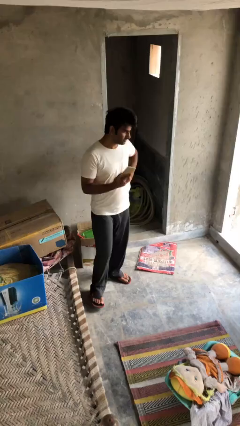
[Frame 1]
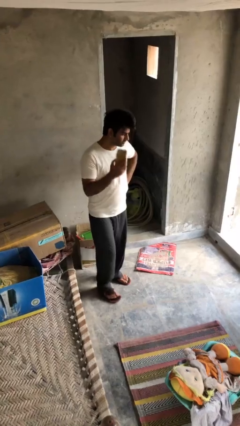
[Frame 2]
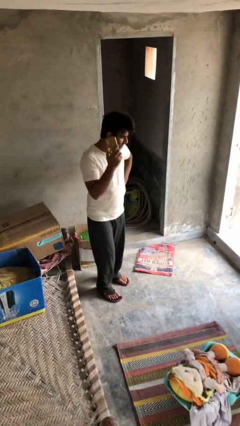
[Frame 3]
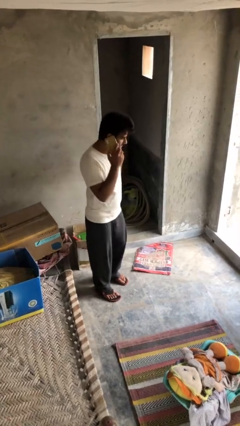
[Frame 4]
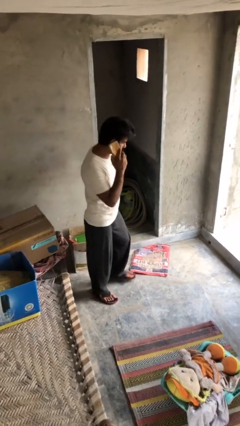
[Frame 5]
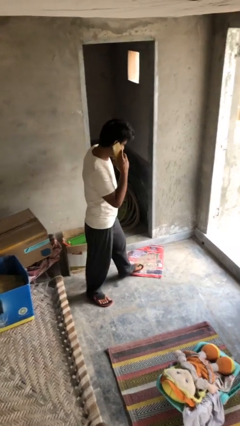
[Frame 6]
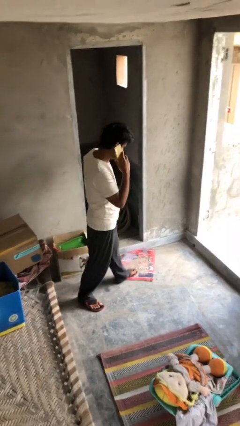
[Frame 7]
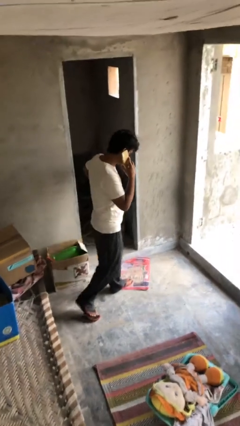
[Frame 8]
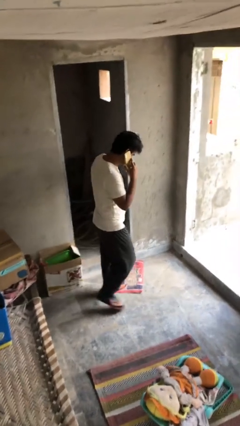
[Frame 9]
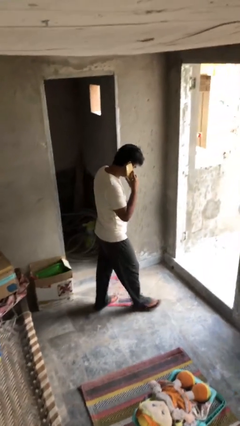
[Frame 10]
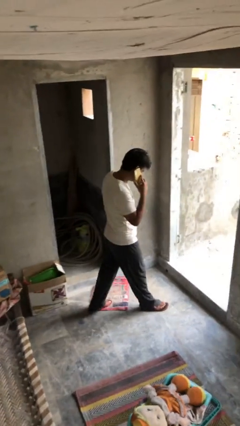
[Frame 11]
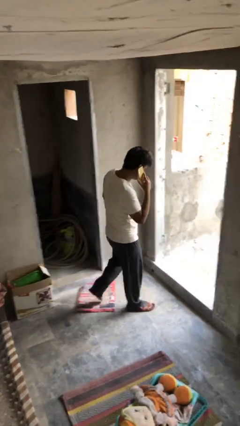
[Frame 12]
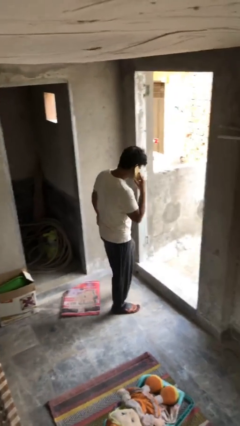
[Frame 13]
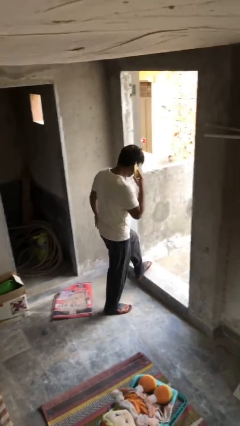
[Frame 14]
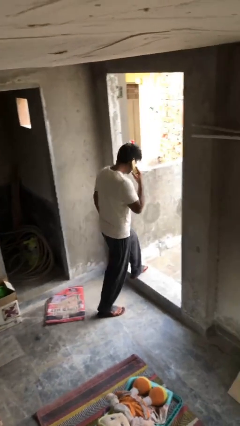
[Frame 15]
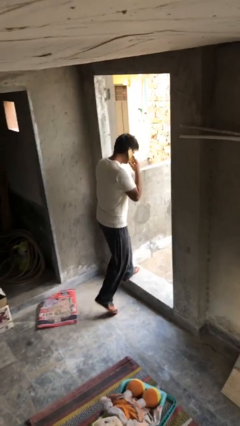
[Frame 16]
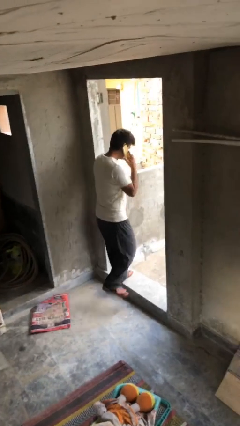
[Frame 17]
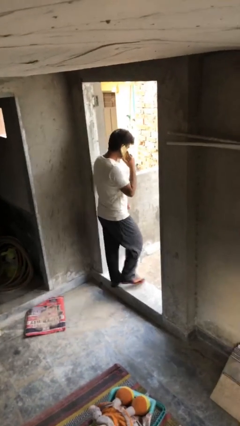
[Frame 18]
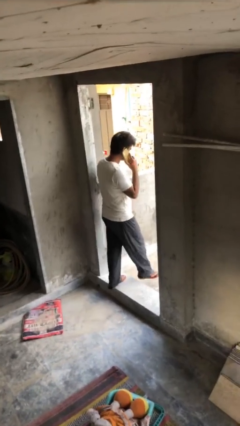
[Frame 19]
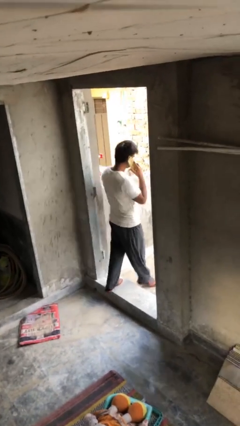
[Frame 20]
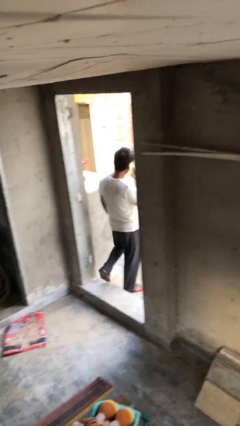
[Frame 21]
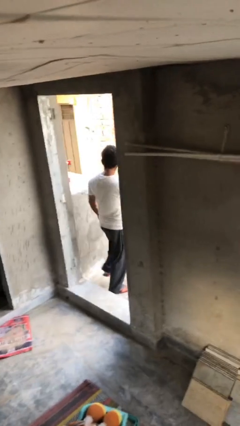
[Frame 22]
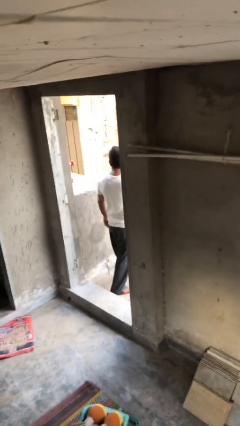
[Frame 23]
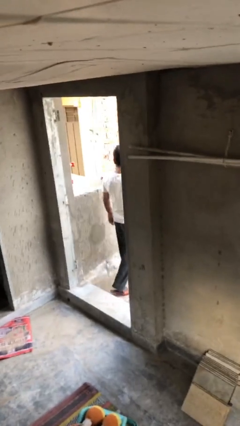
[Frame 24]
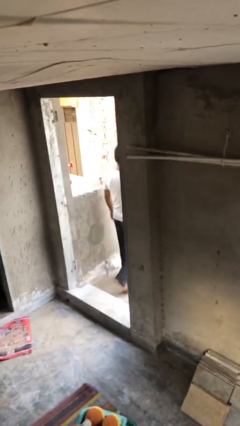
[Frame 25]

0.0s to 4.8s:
person exits scene through structure

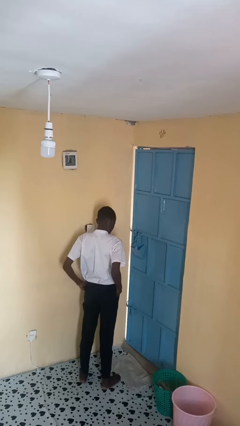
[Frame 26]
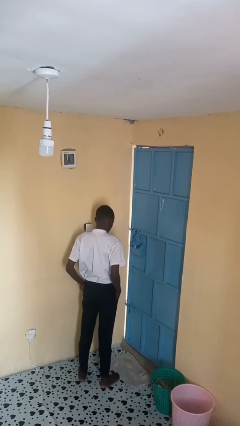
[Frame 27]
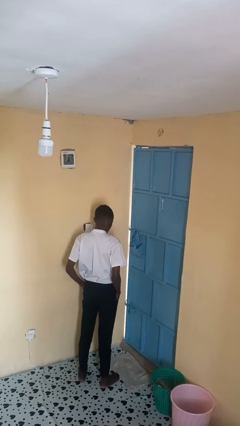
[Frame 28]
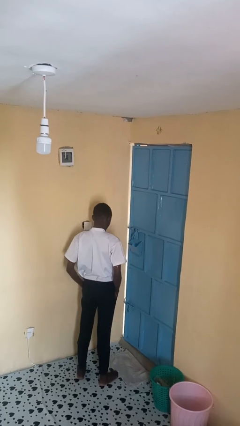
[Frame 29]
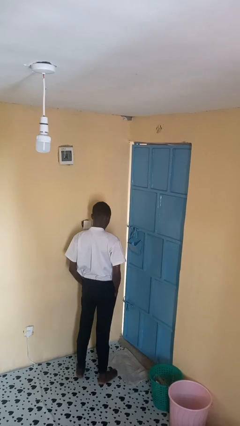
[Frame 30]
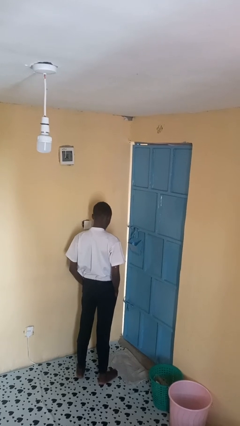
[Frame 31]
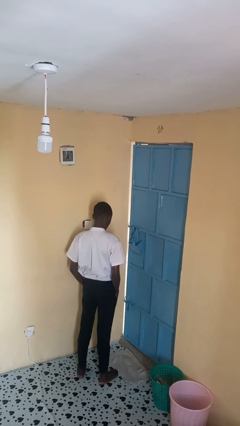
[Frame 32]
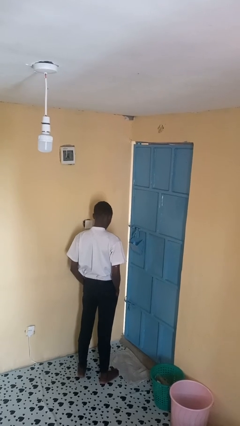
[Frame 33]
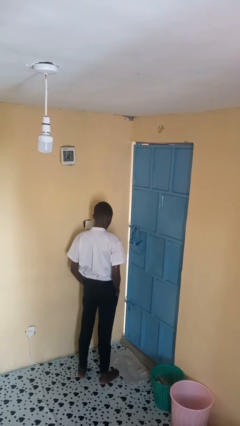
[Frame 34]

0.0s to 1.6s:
person puts hands in back pockets

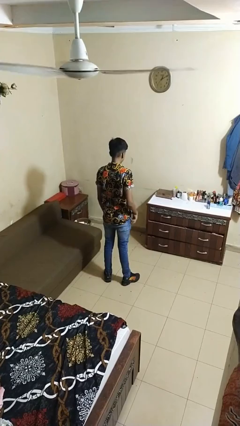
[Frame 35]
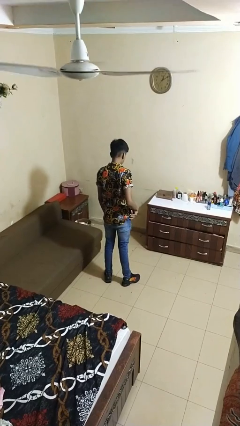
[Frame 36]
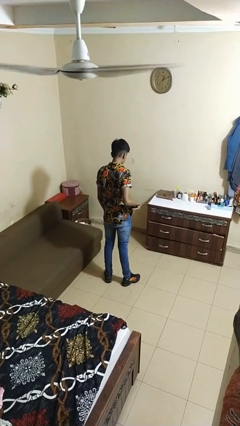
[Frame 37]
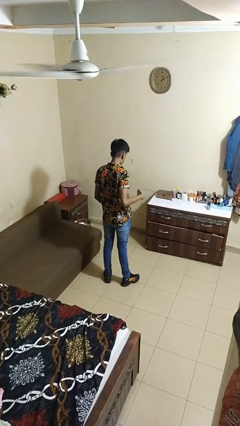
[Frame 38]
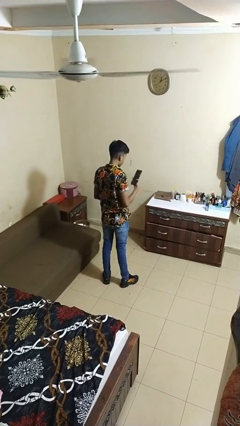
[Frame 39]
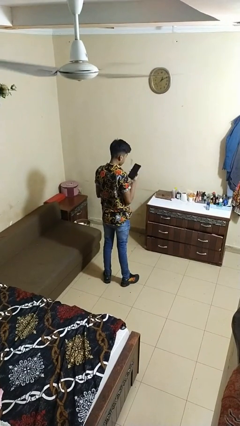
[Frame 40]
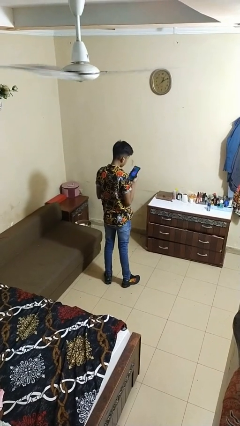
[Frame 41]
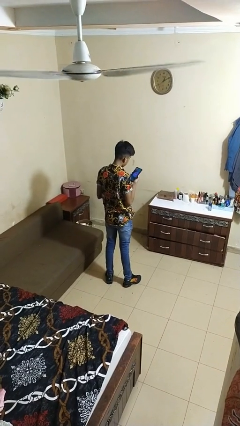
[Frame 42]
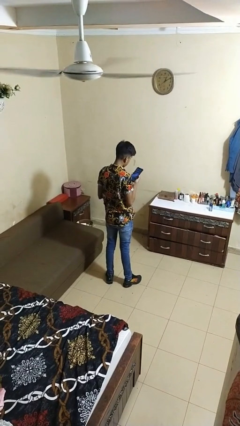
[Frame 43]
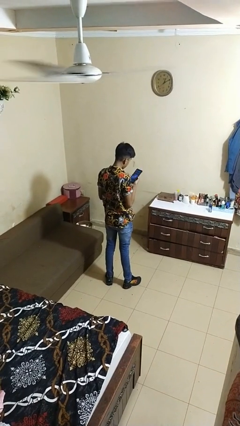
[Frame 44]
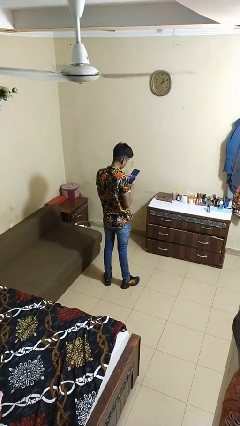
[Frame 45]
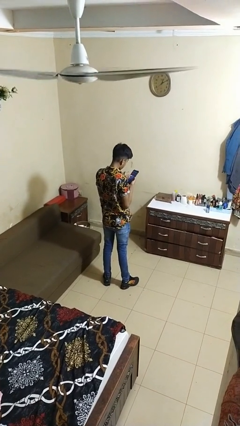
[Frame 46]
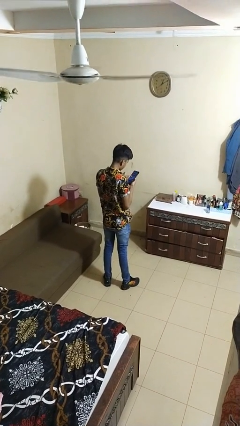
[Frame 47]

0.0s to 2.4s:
person takes phone from pocket

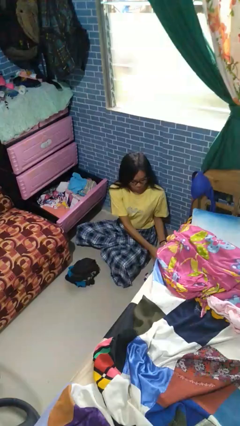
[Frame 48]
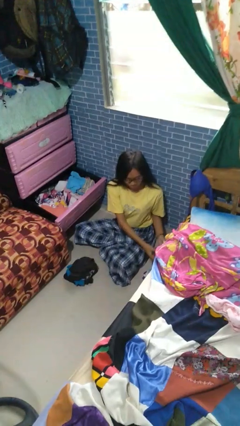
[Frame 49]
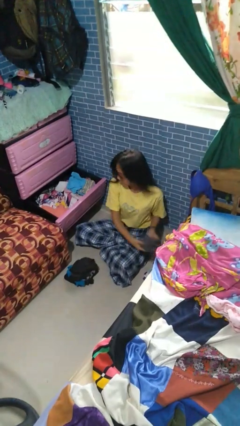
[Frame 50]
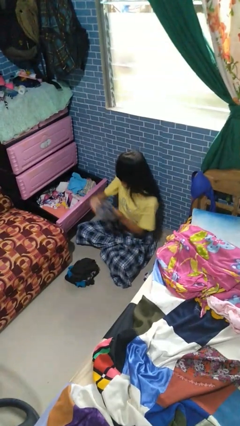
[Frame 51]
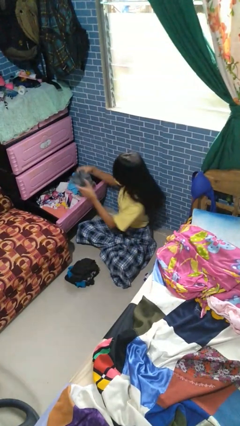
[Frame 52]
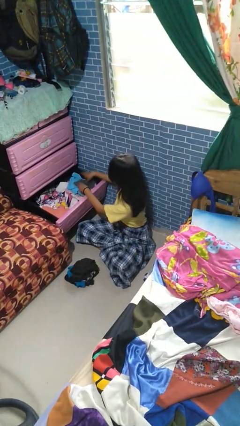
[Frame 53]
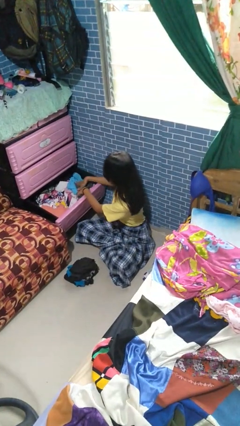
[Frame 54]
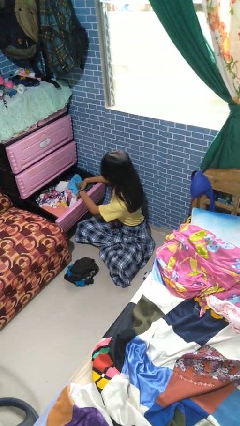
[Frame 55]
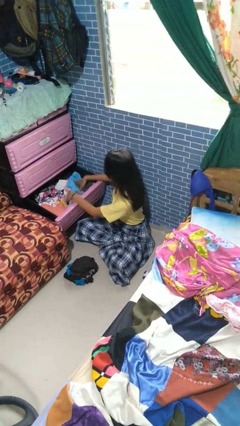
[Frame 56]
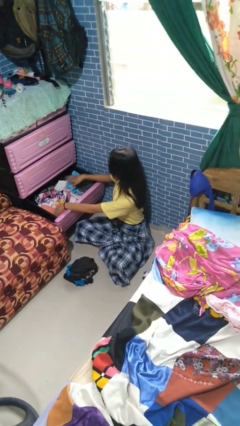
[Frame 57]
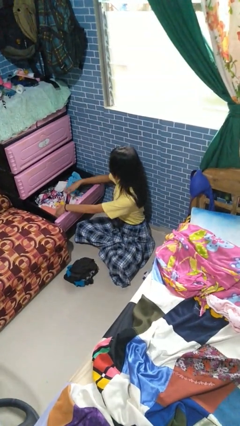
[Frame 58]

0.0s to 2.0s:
person puts clothes into dresser

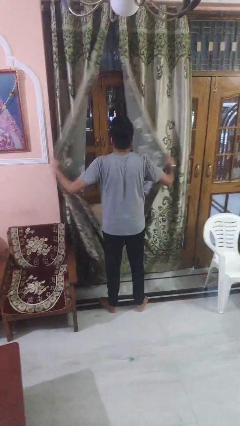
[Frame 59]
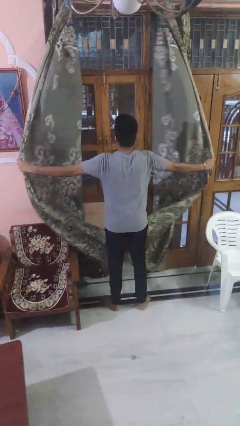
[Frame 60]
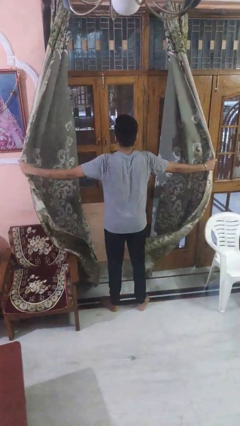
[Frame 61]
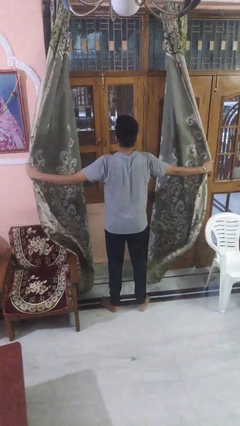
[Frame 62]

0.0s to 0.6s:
person opens curtains

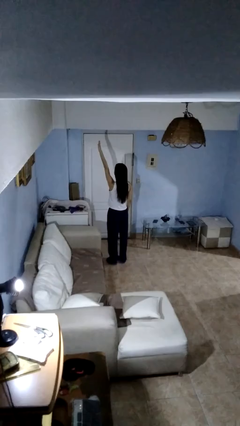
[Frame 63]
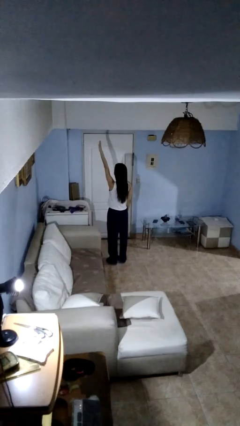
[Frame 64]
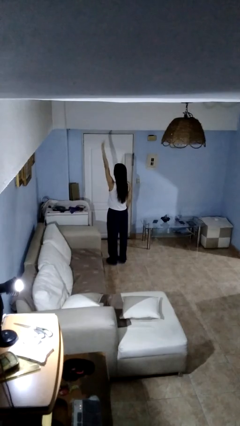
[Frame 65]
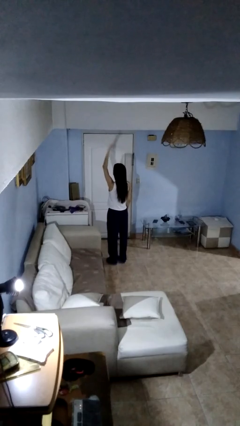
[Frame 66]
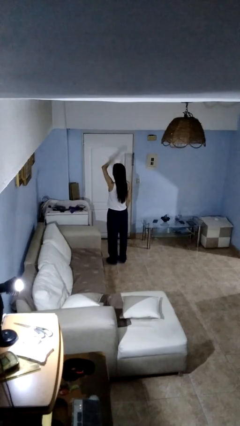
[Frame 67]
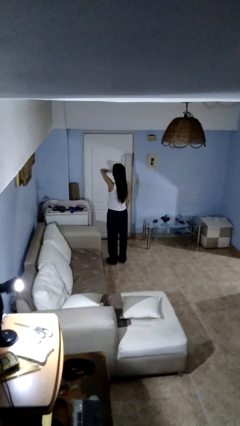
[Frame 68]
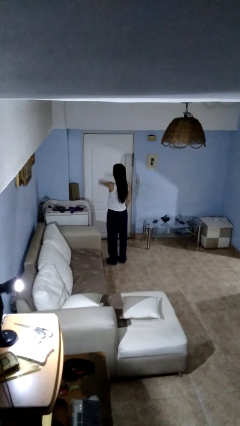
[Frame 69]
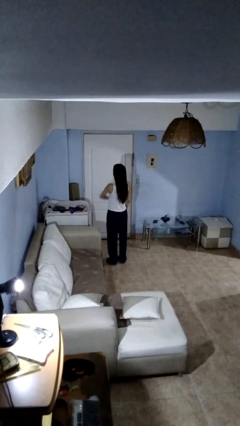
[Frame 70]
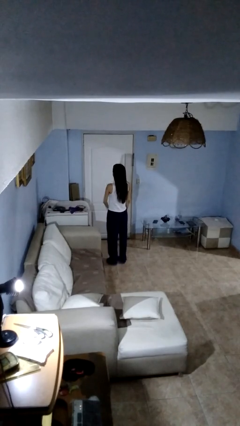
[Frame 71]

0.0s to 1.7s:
person gestures swipe down

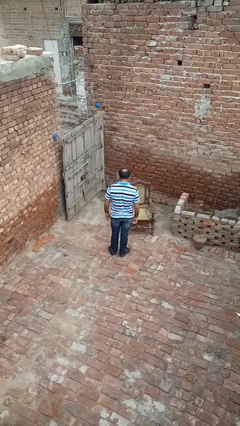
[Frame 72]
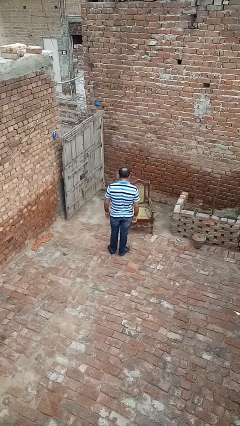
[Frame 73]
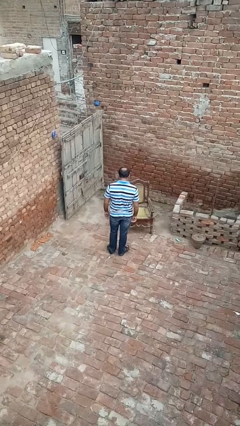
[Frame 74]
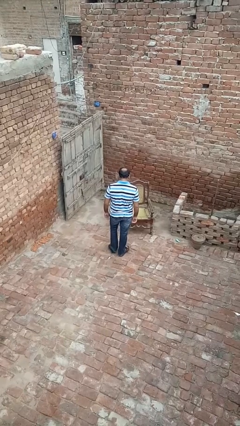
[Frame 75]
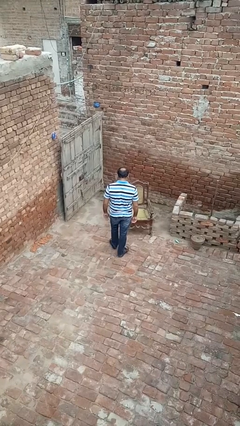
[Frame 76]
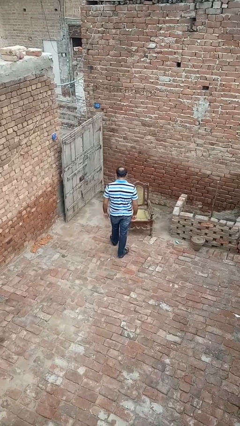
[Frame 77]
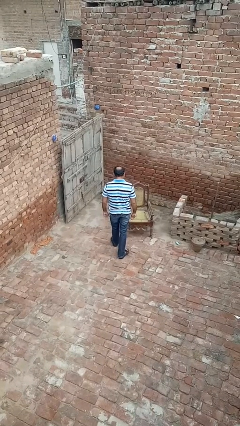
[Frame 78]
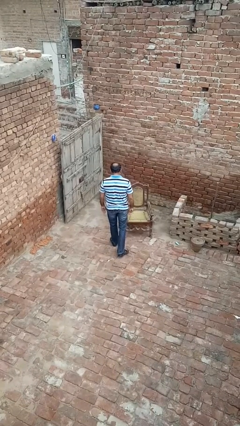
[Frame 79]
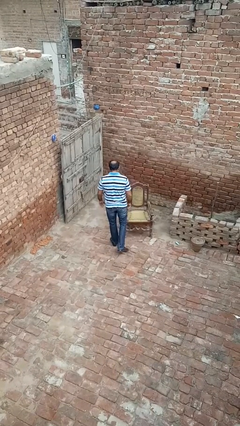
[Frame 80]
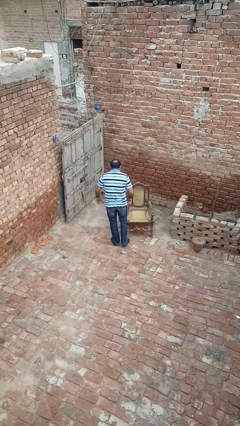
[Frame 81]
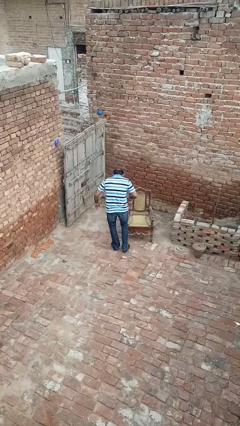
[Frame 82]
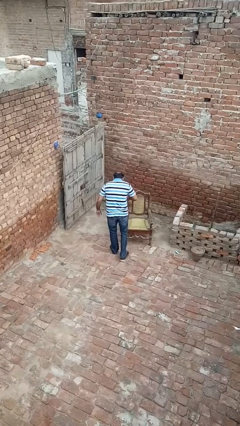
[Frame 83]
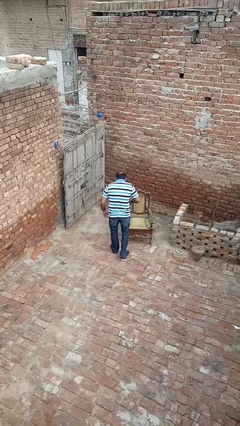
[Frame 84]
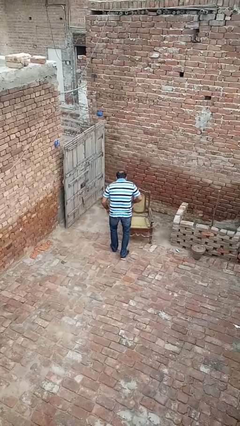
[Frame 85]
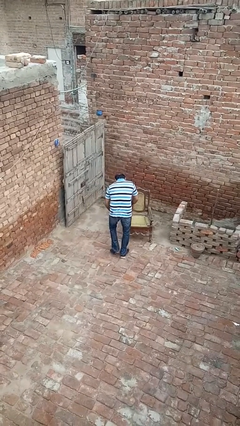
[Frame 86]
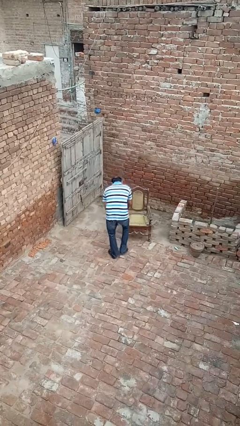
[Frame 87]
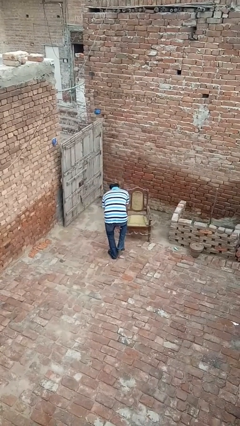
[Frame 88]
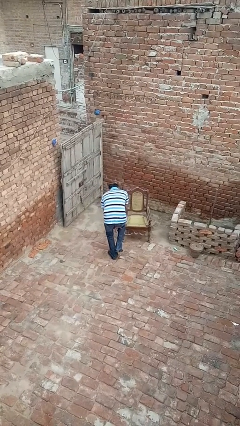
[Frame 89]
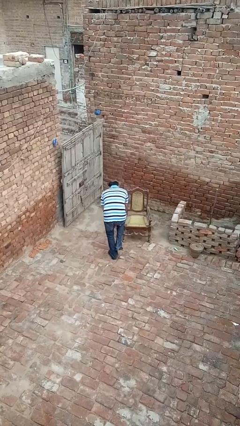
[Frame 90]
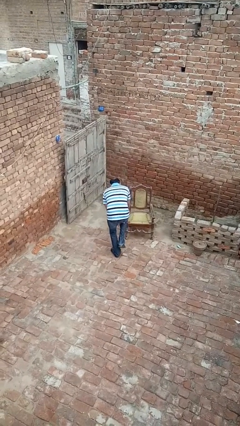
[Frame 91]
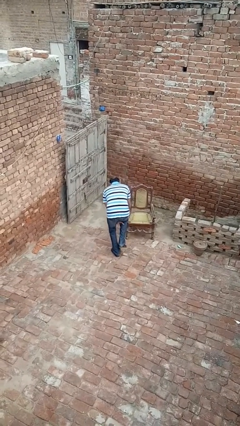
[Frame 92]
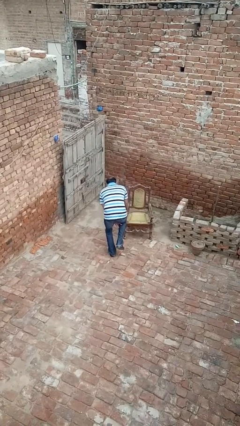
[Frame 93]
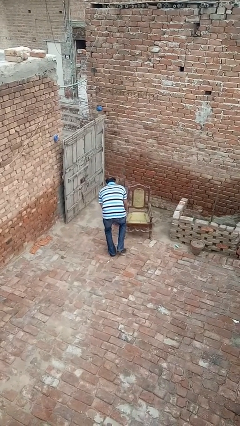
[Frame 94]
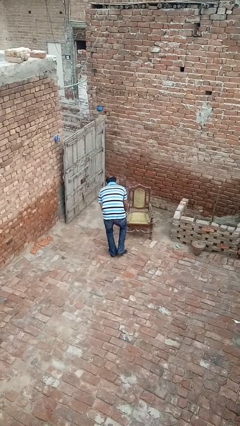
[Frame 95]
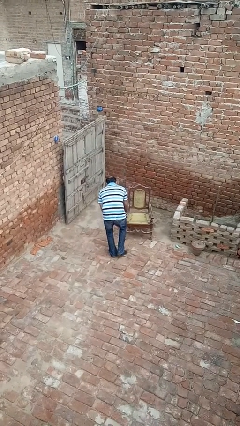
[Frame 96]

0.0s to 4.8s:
person stubs toe
